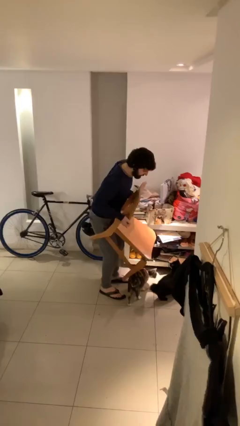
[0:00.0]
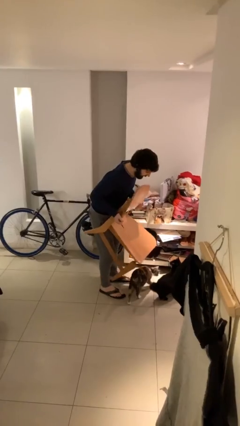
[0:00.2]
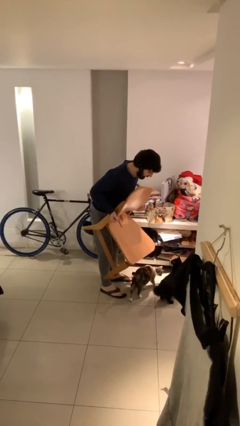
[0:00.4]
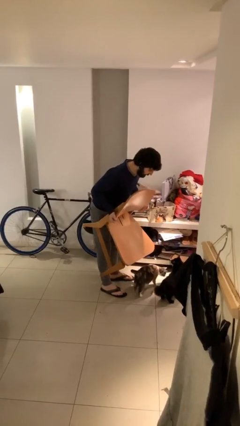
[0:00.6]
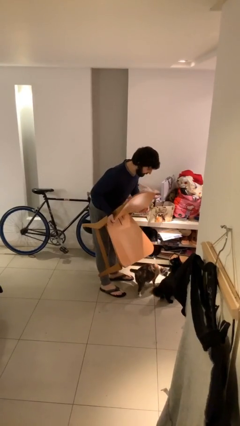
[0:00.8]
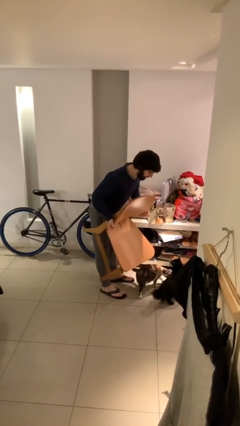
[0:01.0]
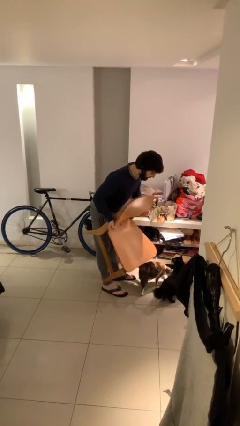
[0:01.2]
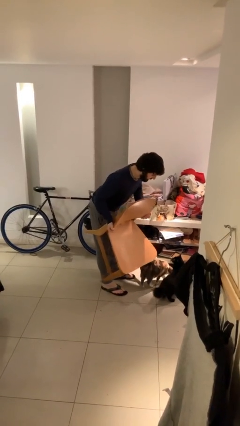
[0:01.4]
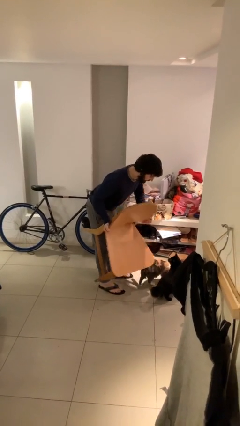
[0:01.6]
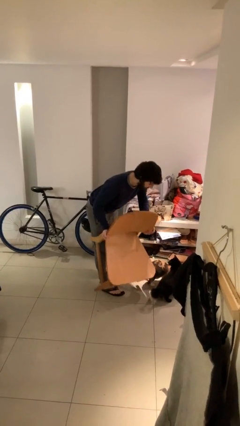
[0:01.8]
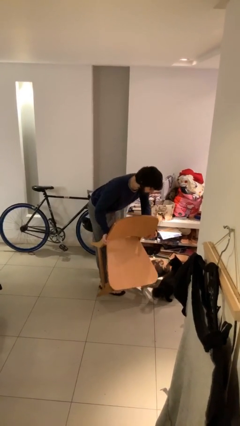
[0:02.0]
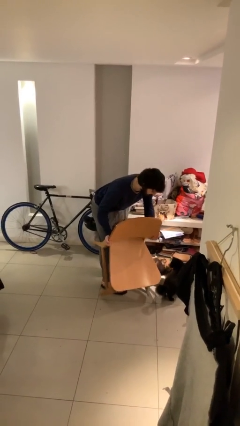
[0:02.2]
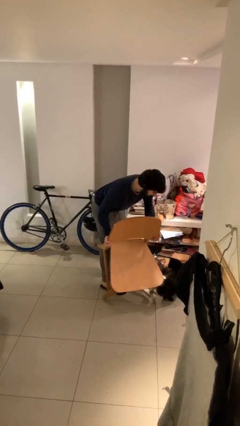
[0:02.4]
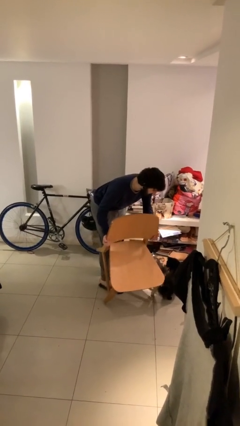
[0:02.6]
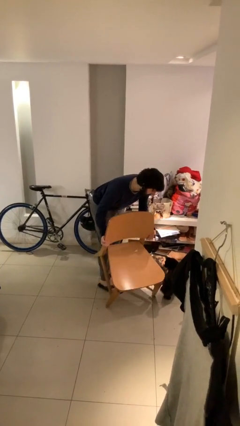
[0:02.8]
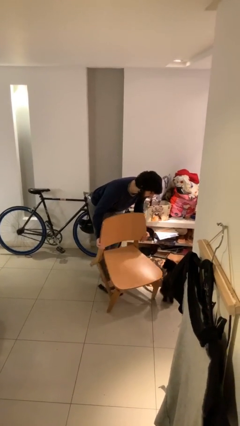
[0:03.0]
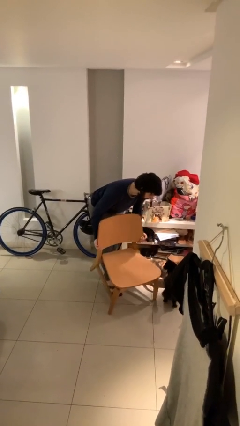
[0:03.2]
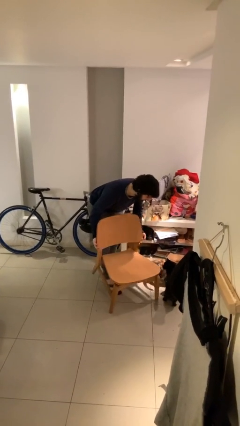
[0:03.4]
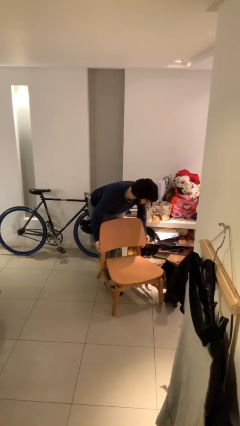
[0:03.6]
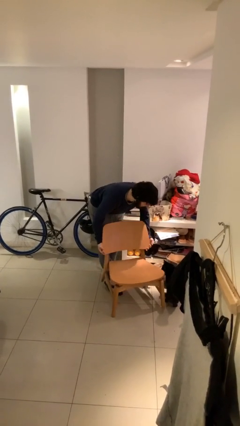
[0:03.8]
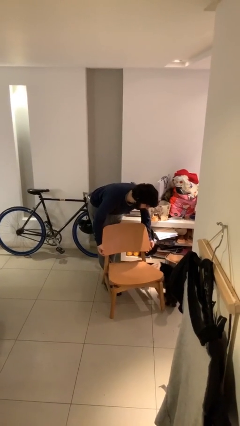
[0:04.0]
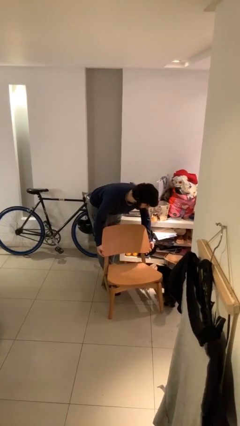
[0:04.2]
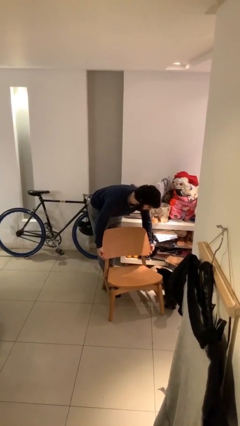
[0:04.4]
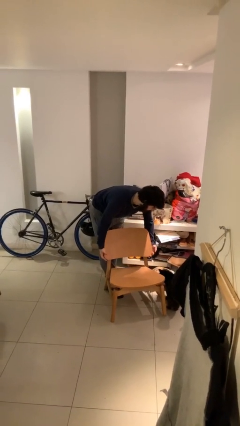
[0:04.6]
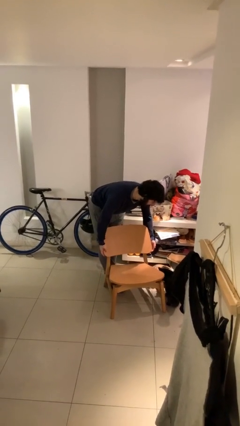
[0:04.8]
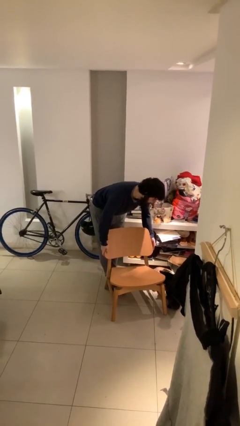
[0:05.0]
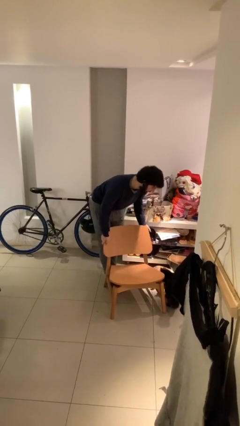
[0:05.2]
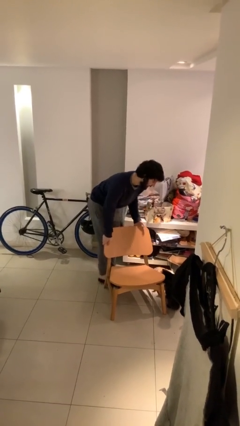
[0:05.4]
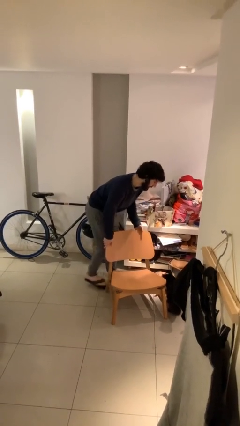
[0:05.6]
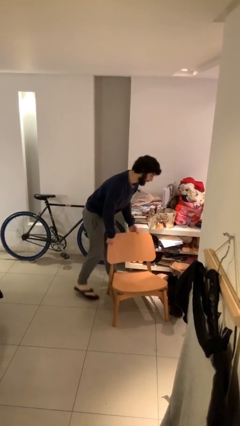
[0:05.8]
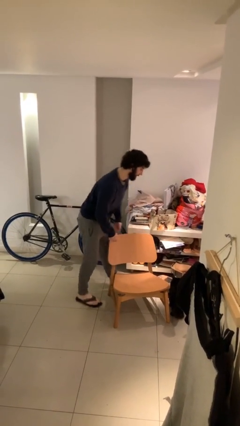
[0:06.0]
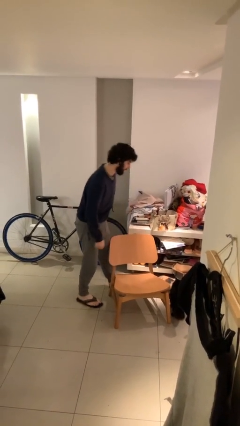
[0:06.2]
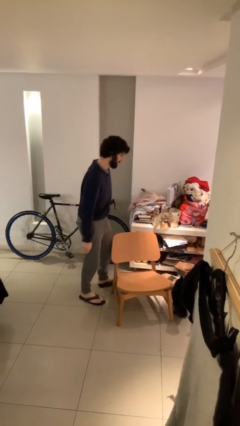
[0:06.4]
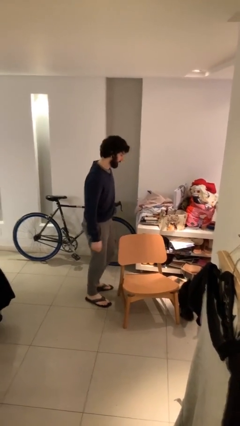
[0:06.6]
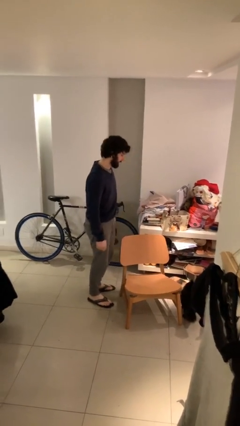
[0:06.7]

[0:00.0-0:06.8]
person puts down object on floor

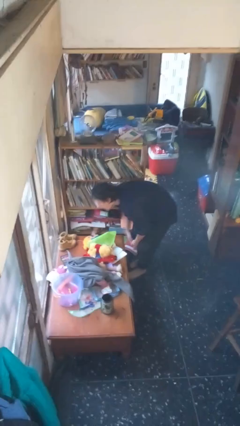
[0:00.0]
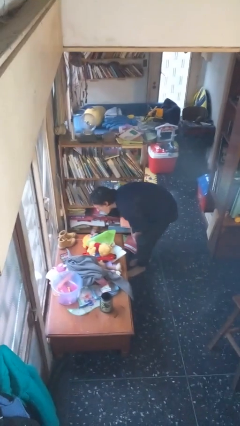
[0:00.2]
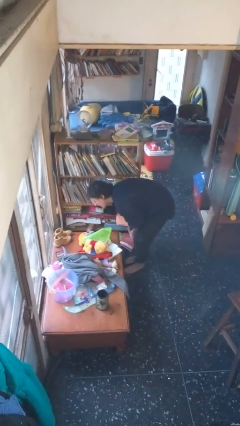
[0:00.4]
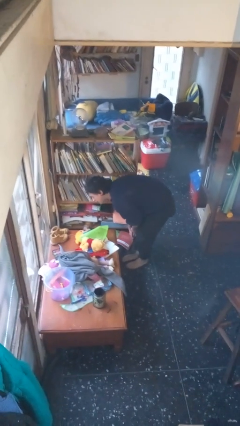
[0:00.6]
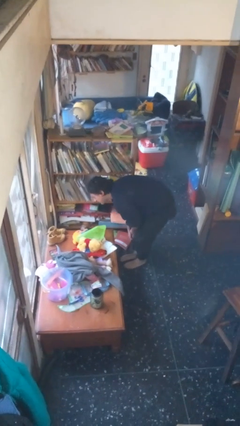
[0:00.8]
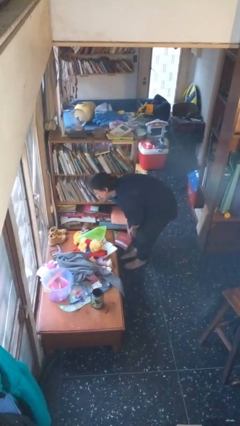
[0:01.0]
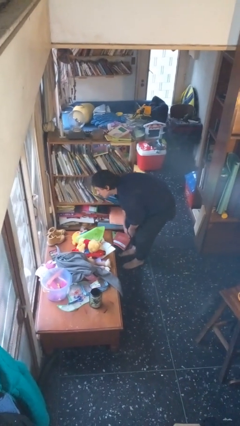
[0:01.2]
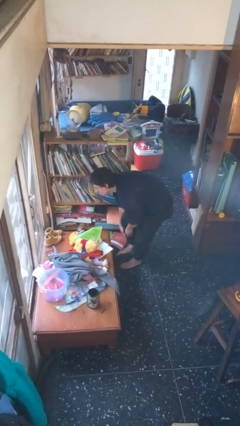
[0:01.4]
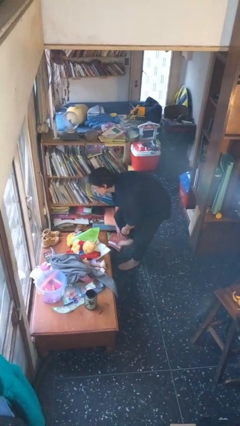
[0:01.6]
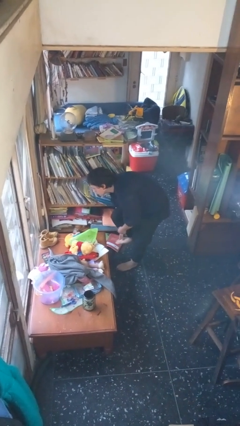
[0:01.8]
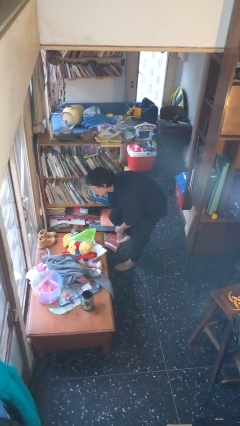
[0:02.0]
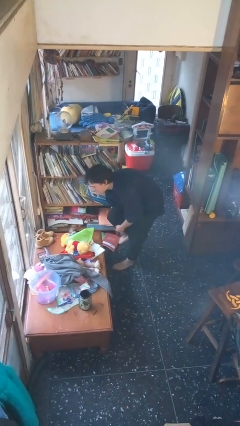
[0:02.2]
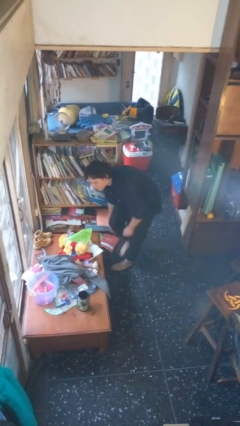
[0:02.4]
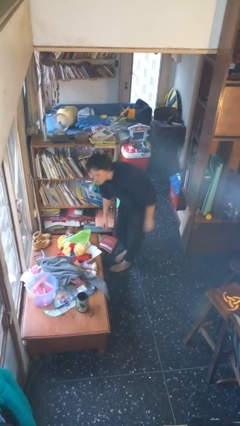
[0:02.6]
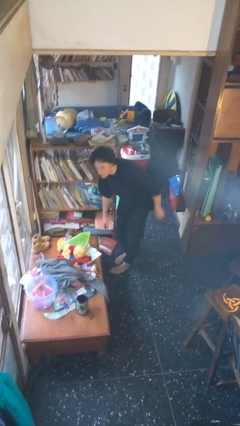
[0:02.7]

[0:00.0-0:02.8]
person stubs toe

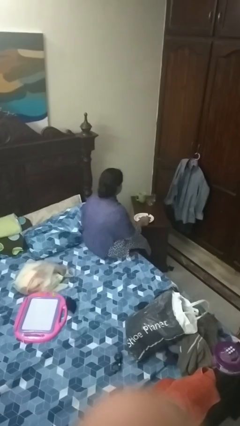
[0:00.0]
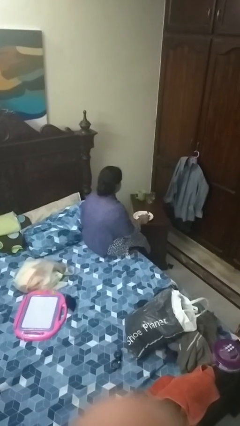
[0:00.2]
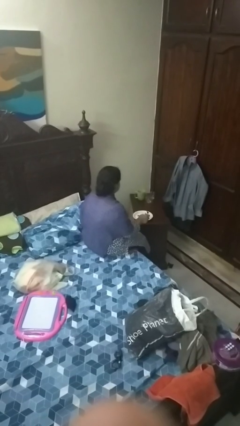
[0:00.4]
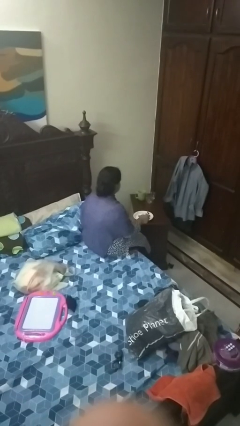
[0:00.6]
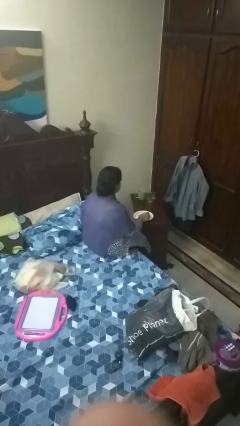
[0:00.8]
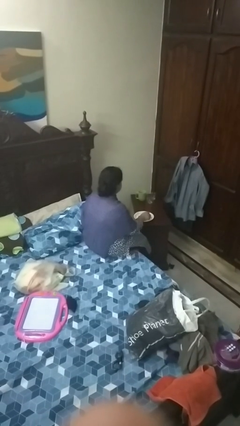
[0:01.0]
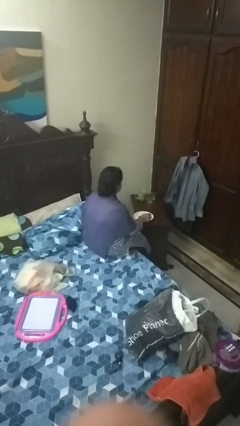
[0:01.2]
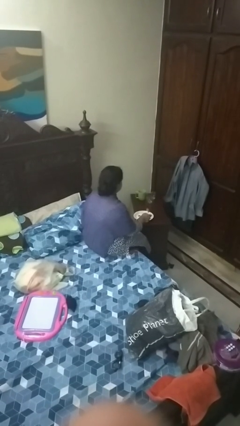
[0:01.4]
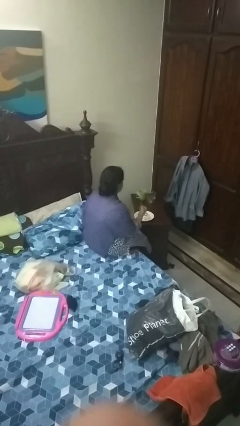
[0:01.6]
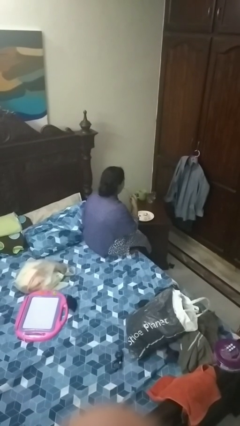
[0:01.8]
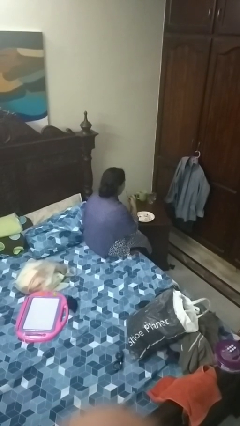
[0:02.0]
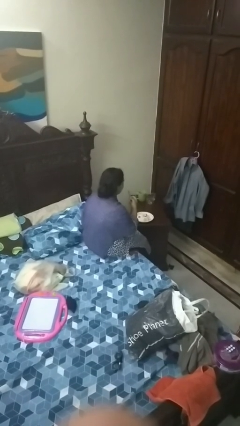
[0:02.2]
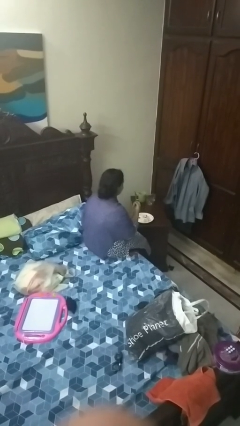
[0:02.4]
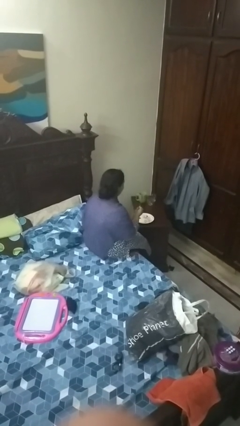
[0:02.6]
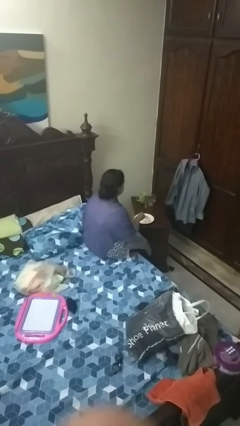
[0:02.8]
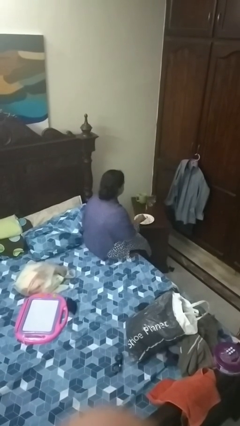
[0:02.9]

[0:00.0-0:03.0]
person eats with utensil

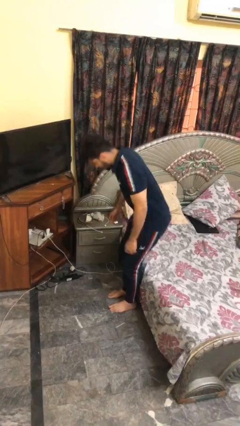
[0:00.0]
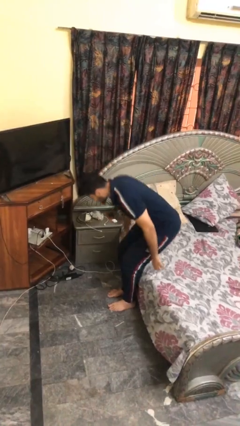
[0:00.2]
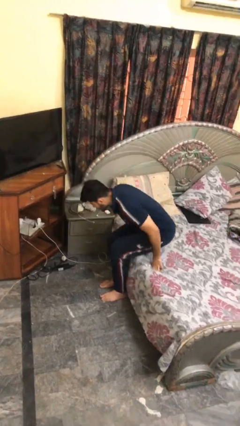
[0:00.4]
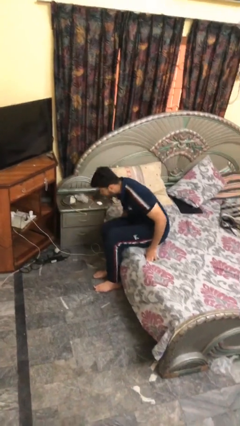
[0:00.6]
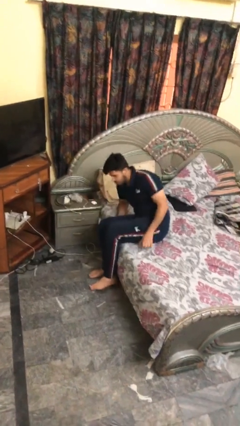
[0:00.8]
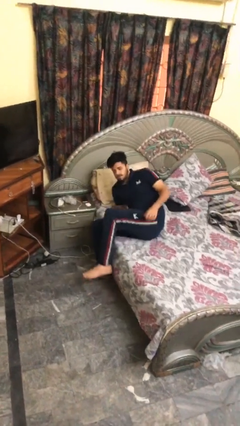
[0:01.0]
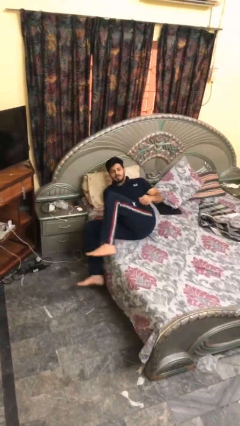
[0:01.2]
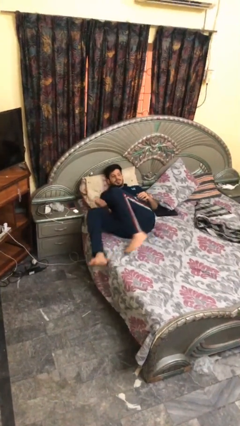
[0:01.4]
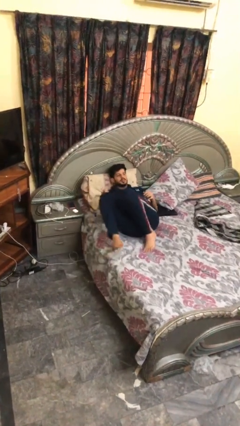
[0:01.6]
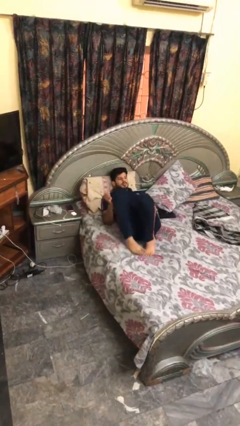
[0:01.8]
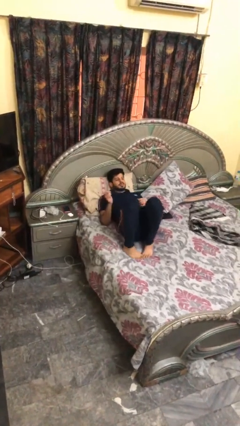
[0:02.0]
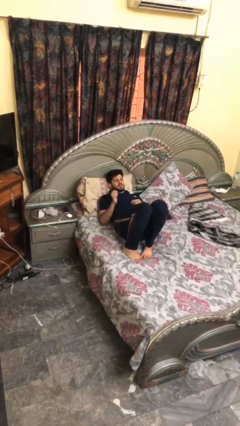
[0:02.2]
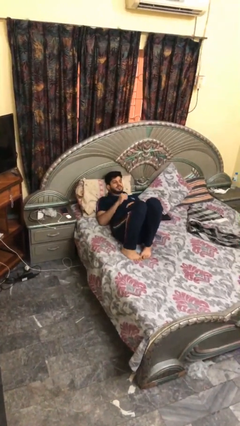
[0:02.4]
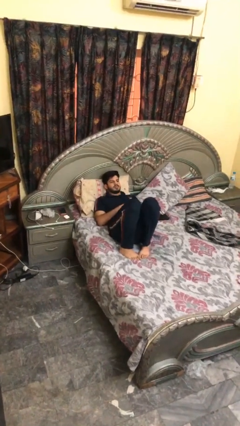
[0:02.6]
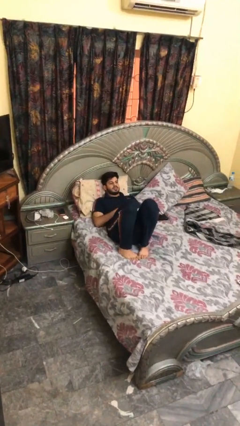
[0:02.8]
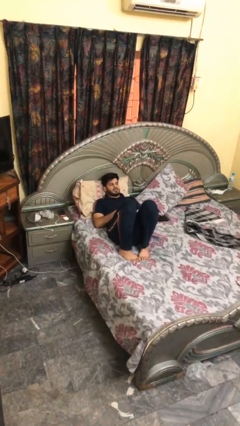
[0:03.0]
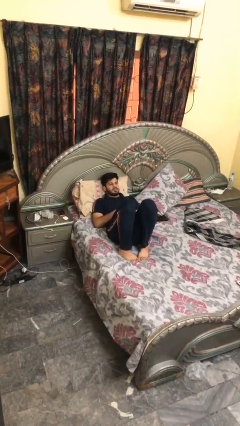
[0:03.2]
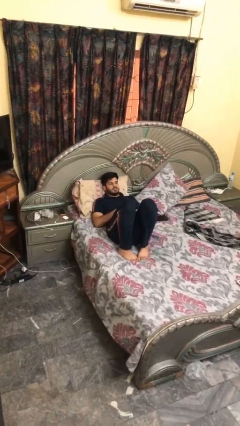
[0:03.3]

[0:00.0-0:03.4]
person lies down on bed

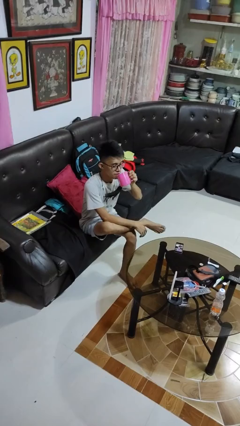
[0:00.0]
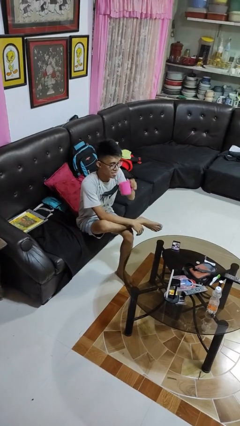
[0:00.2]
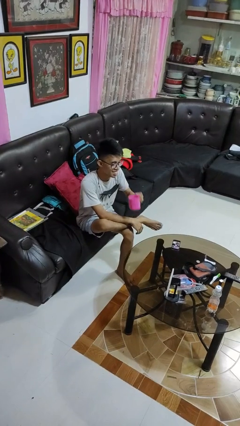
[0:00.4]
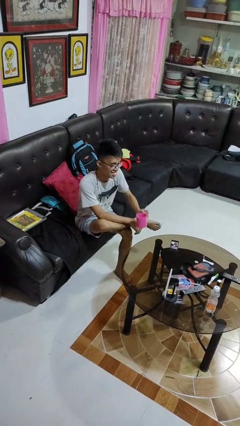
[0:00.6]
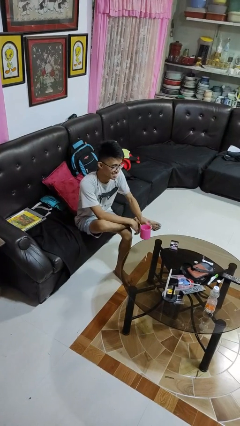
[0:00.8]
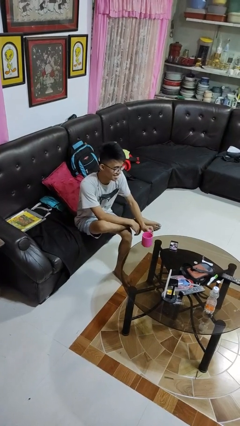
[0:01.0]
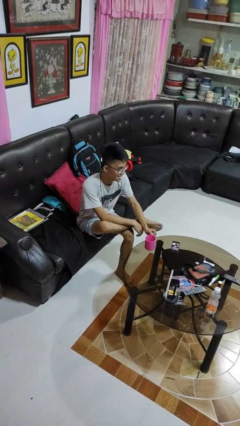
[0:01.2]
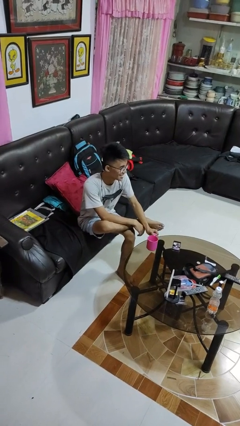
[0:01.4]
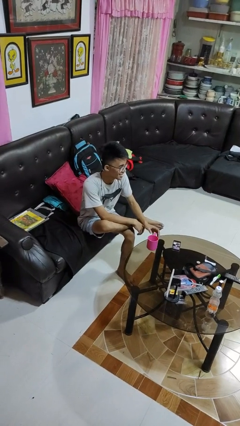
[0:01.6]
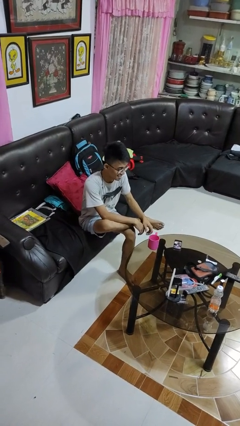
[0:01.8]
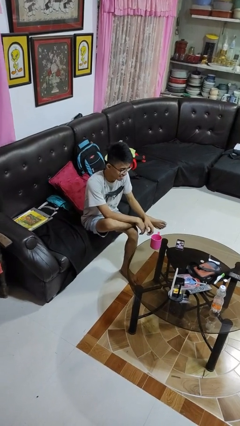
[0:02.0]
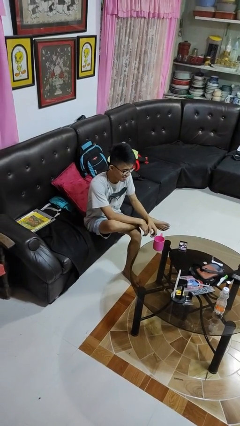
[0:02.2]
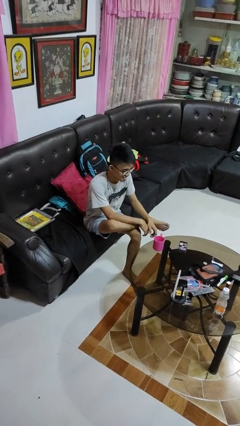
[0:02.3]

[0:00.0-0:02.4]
person puts down object on table
